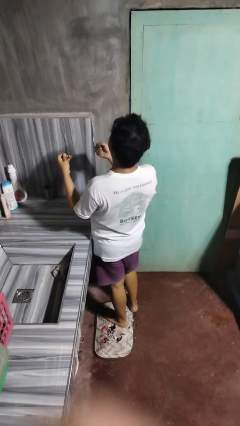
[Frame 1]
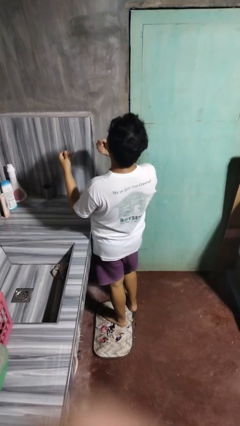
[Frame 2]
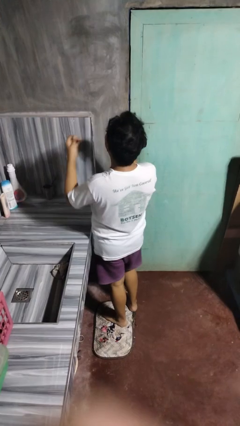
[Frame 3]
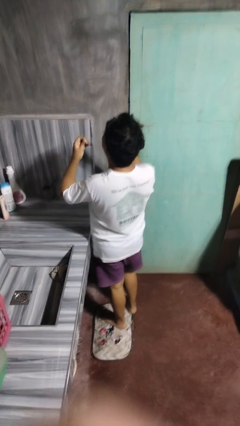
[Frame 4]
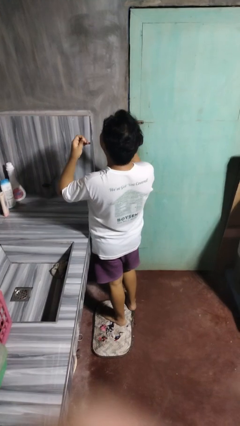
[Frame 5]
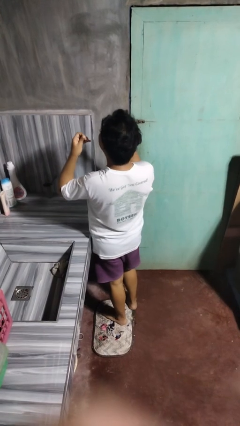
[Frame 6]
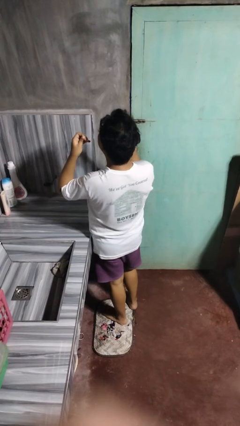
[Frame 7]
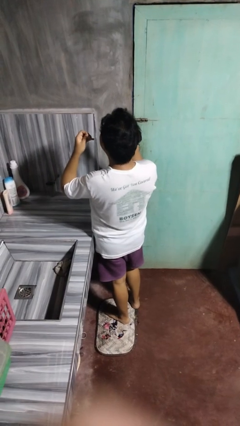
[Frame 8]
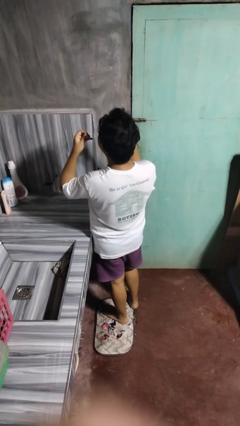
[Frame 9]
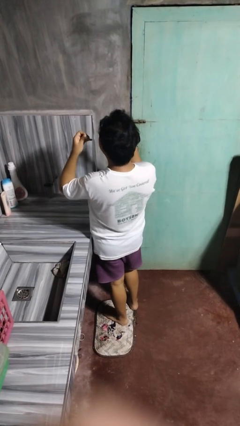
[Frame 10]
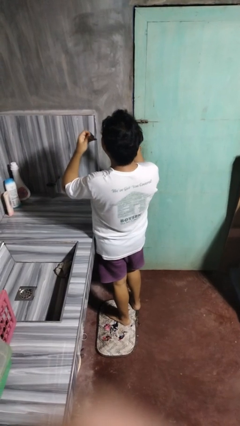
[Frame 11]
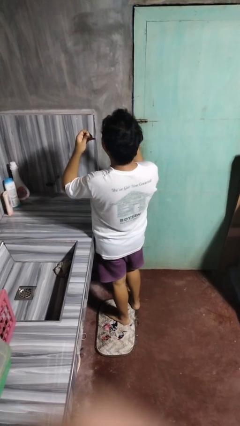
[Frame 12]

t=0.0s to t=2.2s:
person flosses

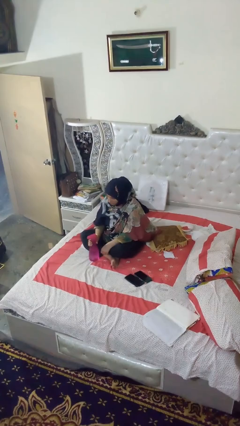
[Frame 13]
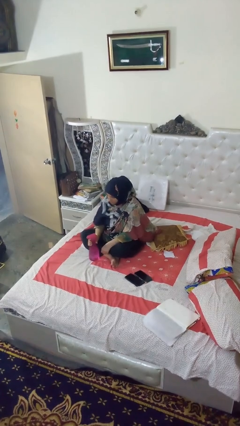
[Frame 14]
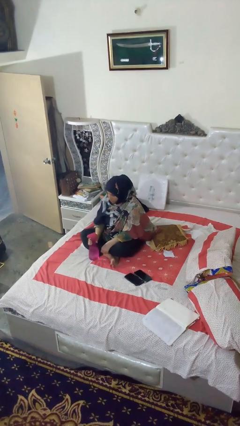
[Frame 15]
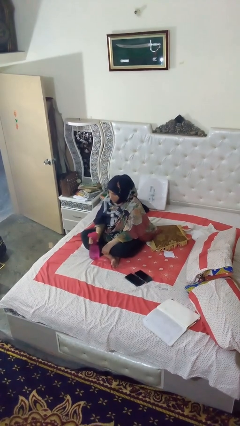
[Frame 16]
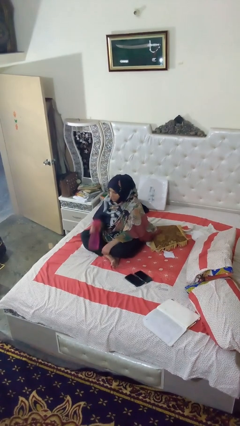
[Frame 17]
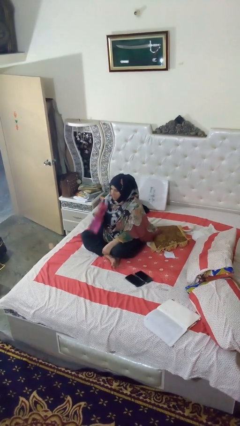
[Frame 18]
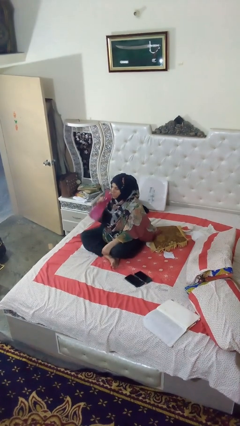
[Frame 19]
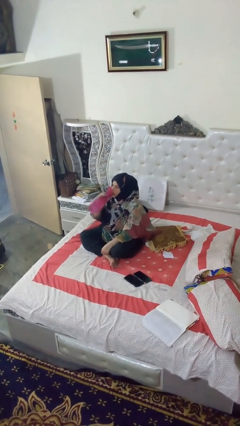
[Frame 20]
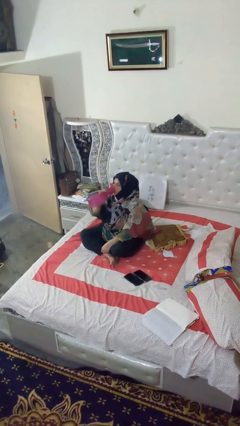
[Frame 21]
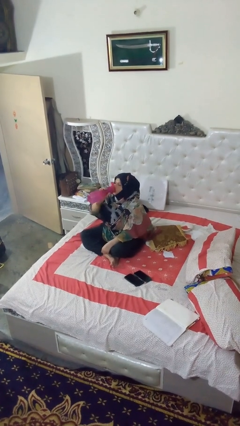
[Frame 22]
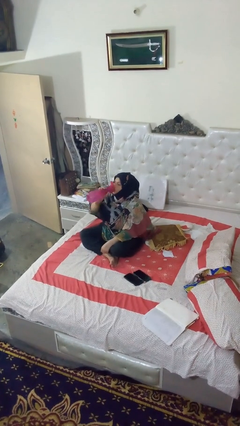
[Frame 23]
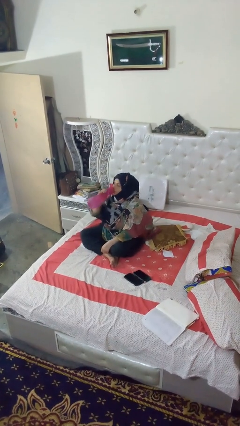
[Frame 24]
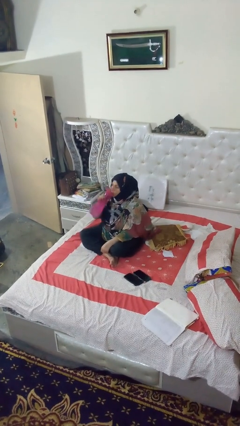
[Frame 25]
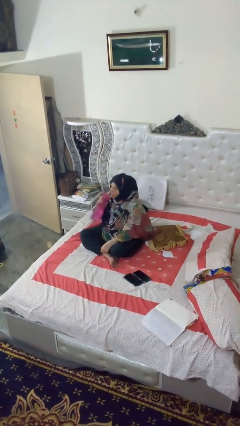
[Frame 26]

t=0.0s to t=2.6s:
person drinks from bottle

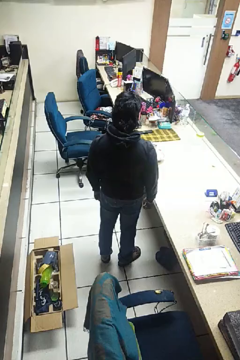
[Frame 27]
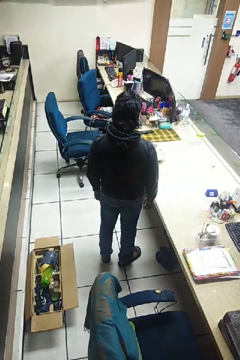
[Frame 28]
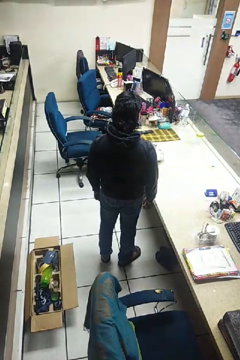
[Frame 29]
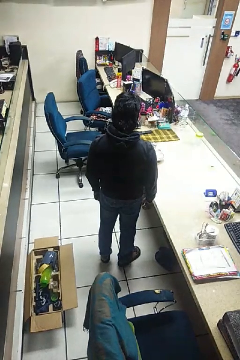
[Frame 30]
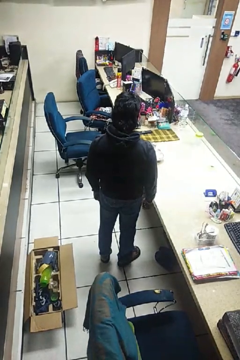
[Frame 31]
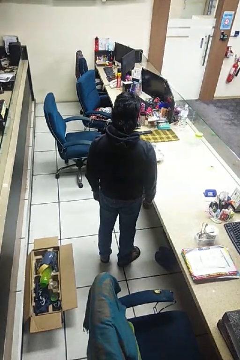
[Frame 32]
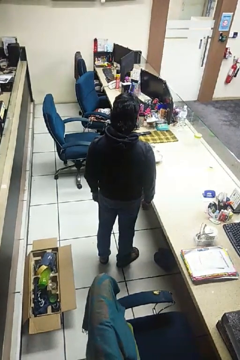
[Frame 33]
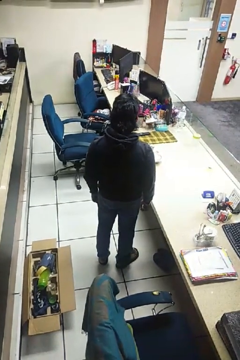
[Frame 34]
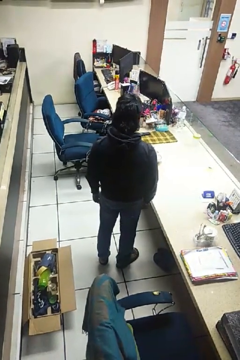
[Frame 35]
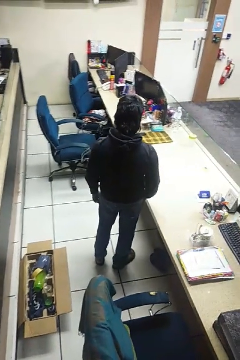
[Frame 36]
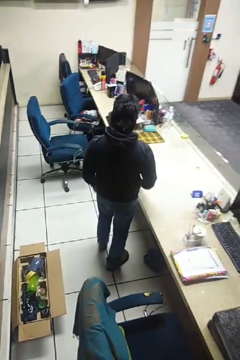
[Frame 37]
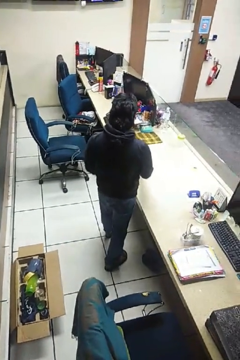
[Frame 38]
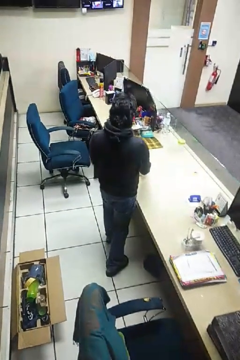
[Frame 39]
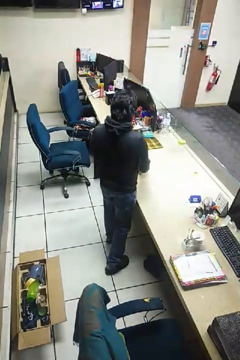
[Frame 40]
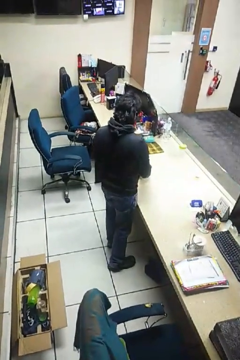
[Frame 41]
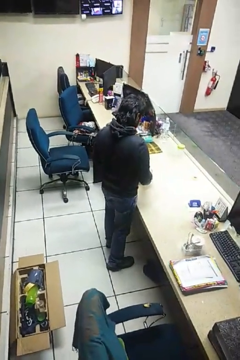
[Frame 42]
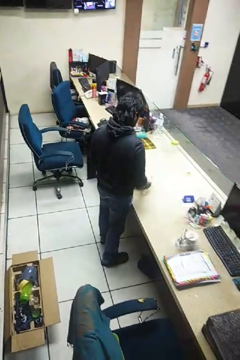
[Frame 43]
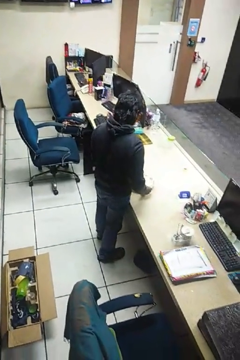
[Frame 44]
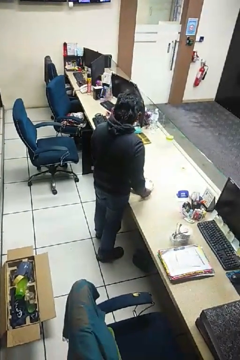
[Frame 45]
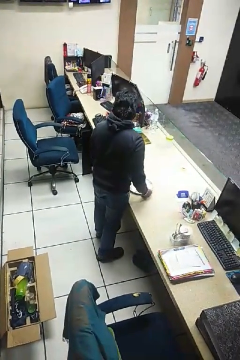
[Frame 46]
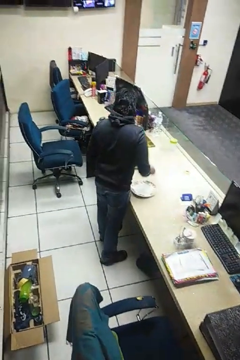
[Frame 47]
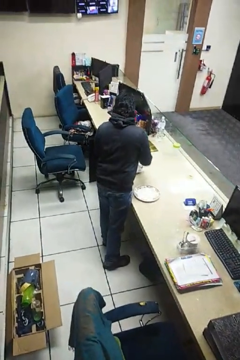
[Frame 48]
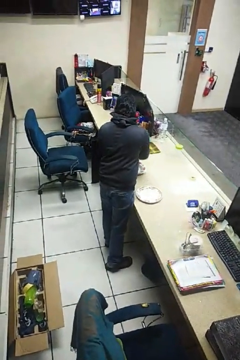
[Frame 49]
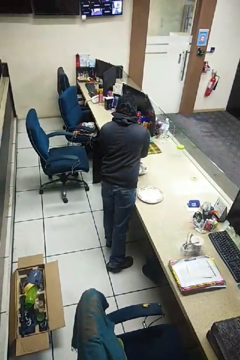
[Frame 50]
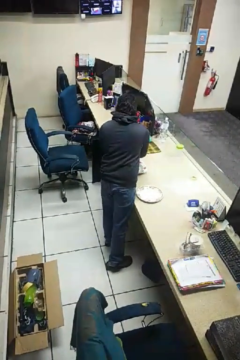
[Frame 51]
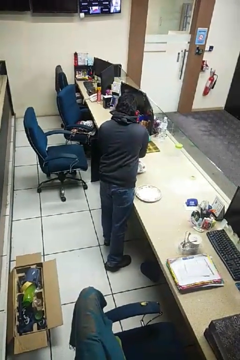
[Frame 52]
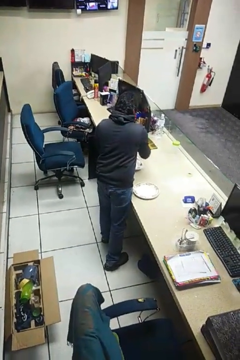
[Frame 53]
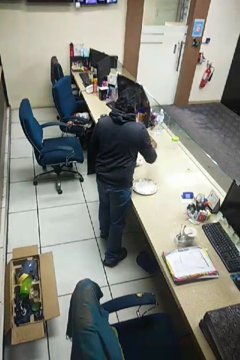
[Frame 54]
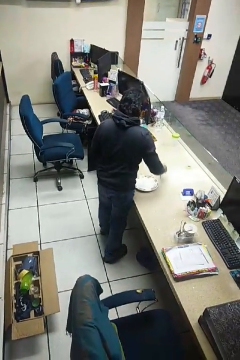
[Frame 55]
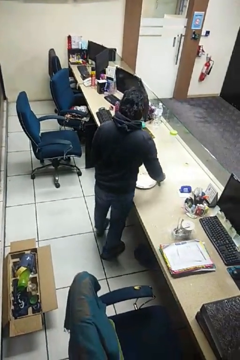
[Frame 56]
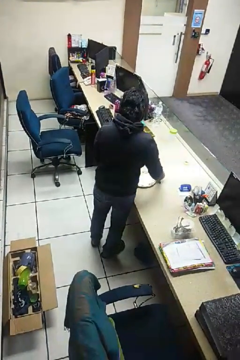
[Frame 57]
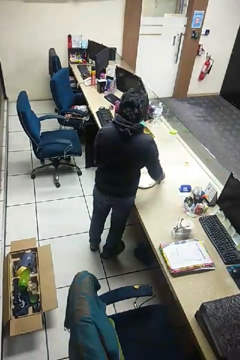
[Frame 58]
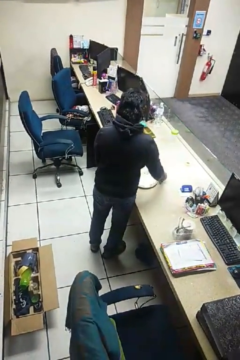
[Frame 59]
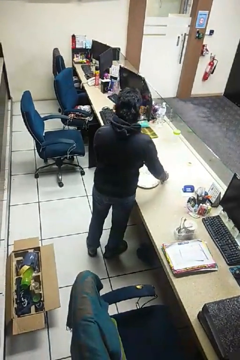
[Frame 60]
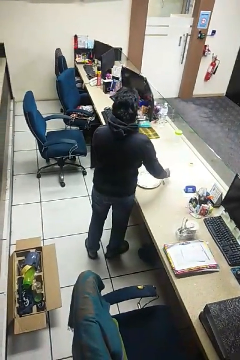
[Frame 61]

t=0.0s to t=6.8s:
person sets table

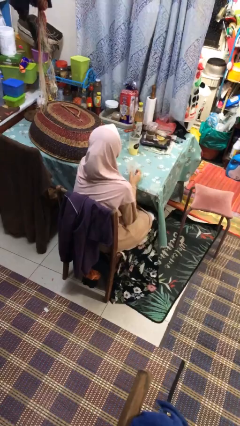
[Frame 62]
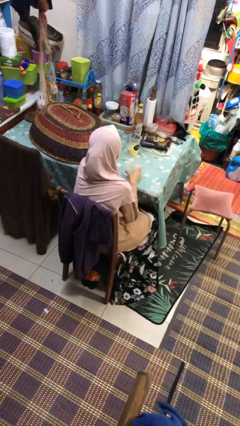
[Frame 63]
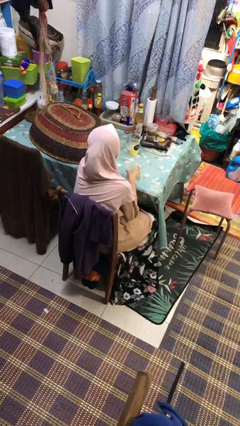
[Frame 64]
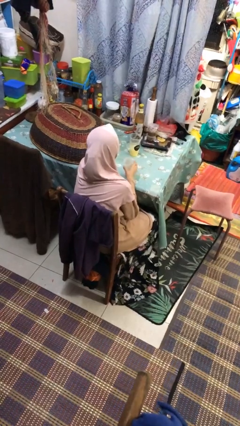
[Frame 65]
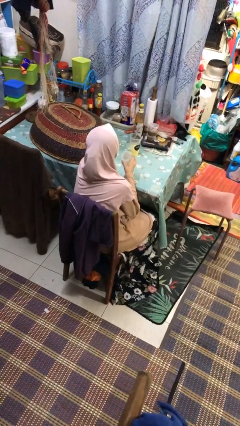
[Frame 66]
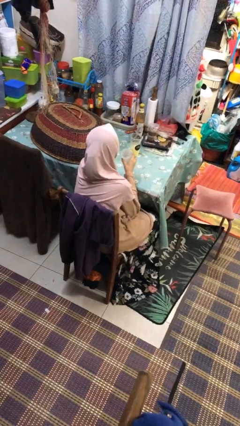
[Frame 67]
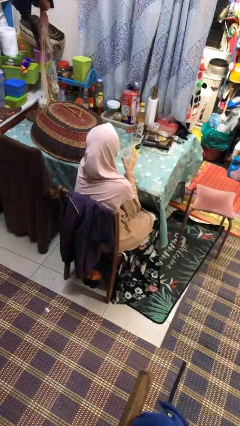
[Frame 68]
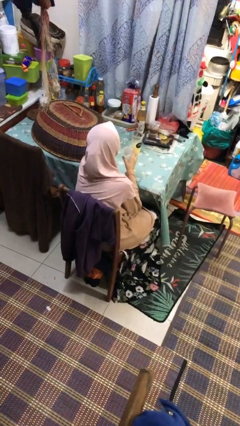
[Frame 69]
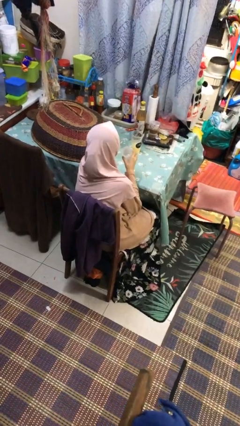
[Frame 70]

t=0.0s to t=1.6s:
person picks up object from table

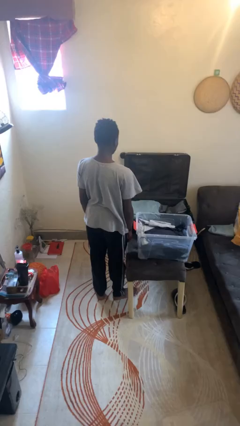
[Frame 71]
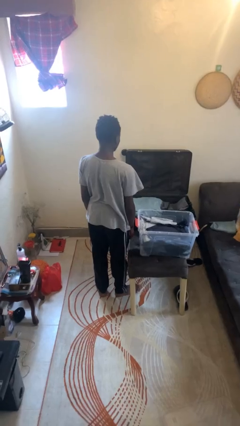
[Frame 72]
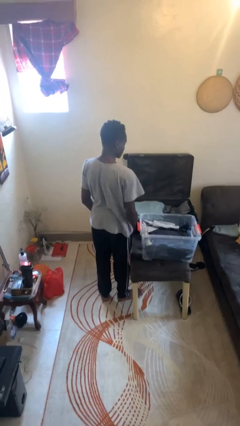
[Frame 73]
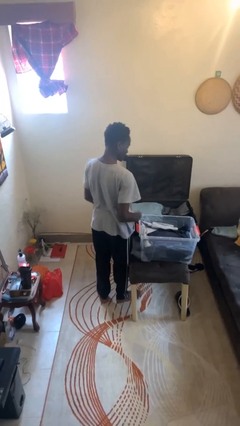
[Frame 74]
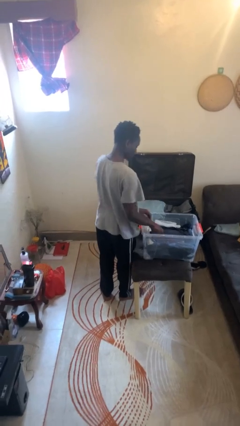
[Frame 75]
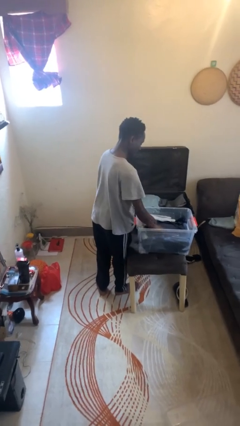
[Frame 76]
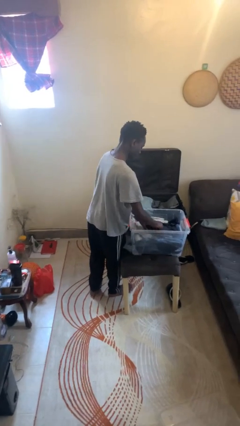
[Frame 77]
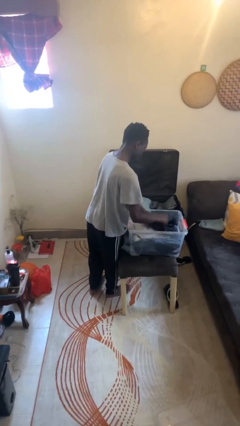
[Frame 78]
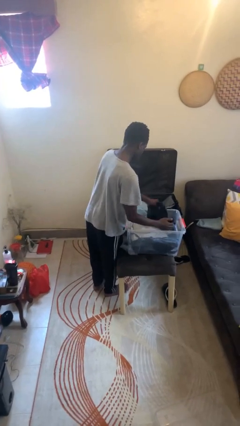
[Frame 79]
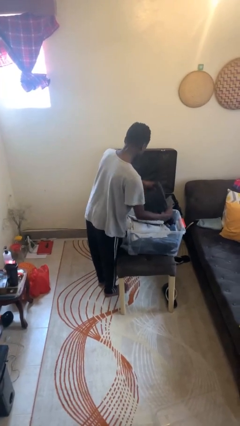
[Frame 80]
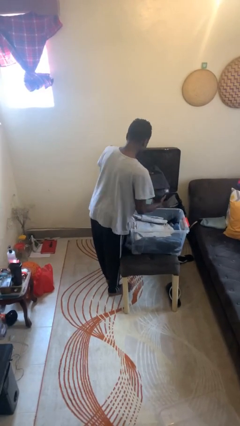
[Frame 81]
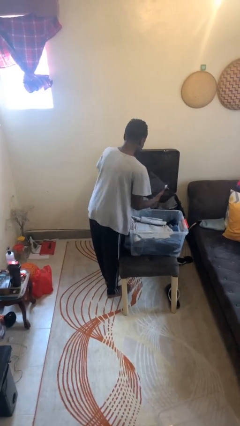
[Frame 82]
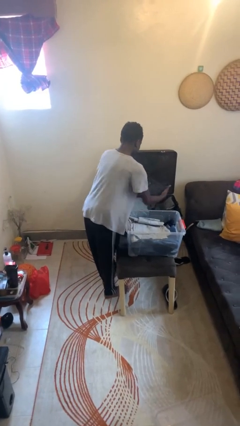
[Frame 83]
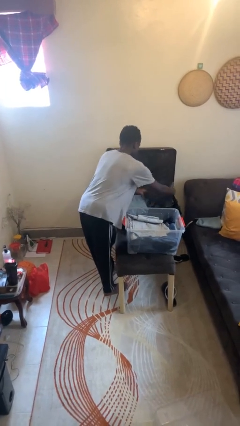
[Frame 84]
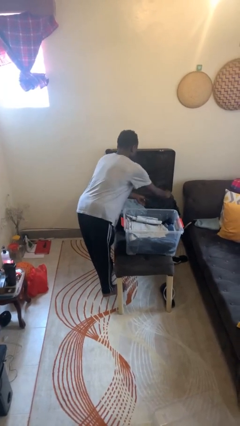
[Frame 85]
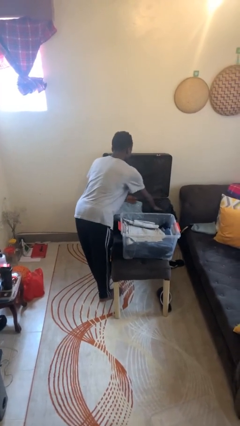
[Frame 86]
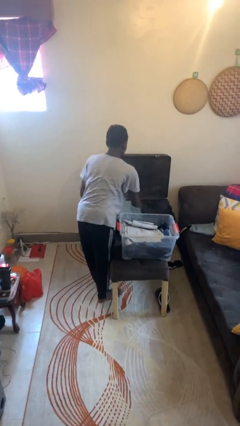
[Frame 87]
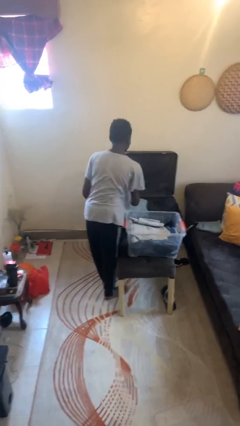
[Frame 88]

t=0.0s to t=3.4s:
person loads clothes into suitcase

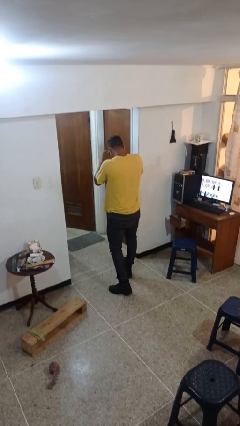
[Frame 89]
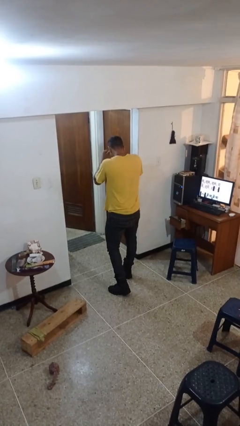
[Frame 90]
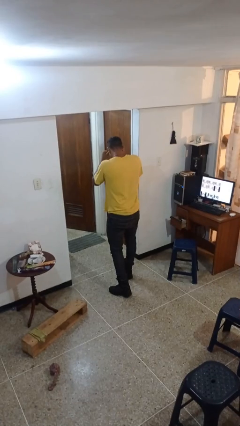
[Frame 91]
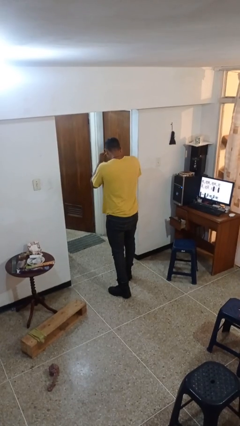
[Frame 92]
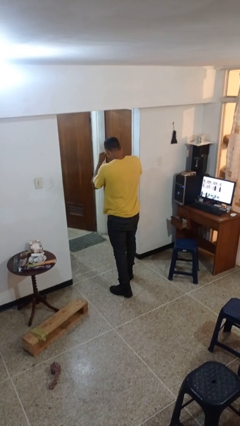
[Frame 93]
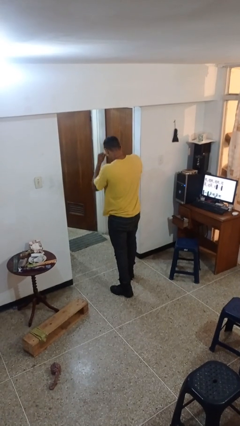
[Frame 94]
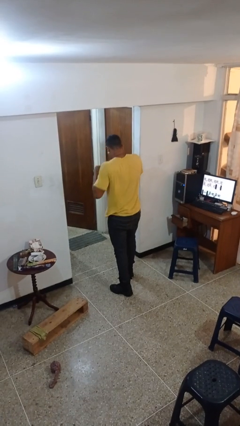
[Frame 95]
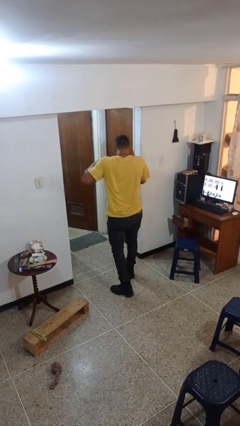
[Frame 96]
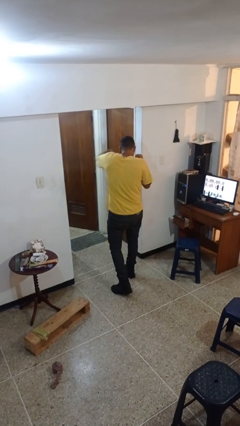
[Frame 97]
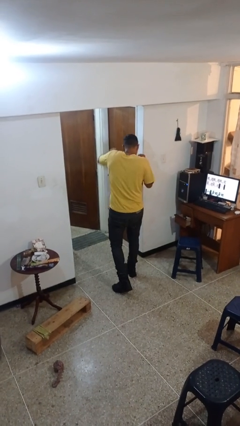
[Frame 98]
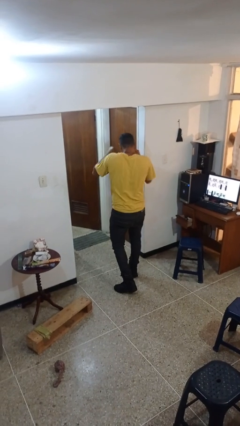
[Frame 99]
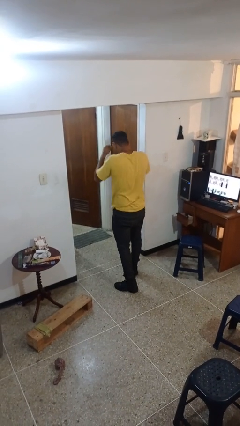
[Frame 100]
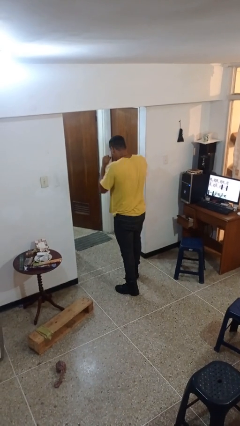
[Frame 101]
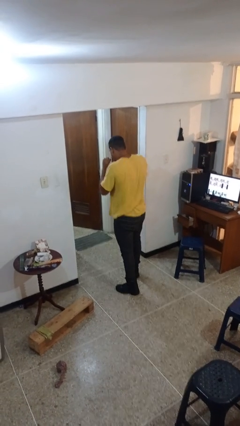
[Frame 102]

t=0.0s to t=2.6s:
person punches
